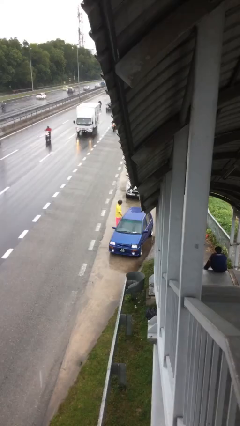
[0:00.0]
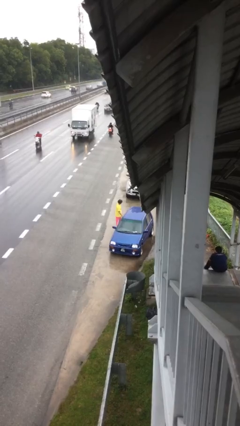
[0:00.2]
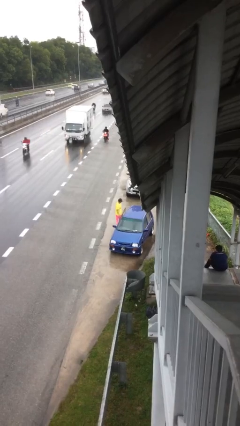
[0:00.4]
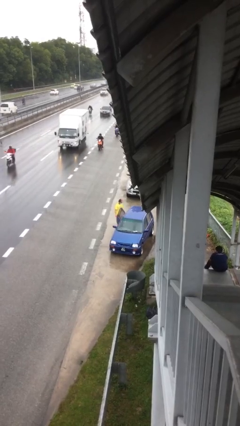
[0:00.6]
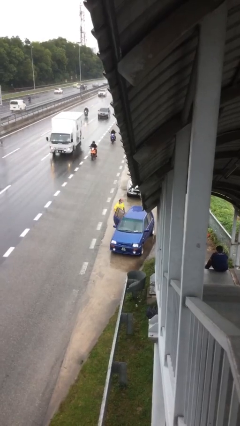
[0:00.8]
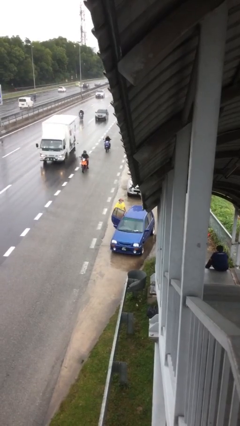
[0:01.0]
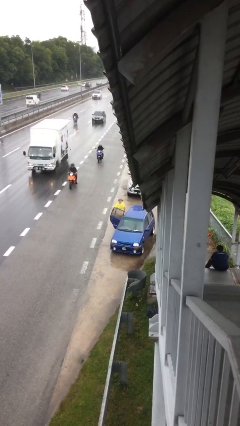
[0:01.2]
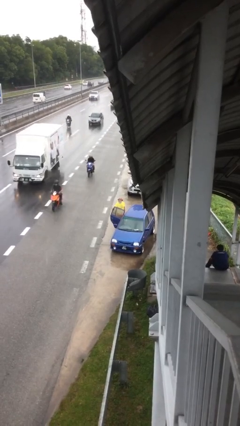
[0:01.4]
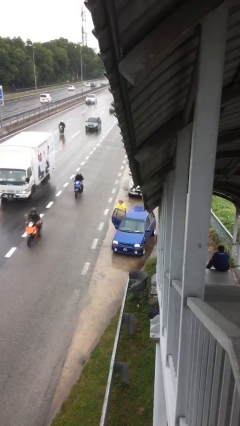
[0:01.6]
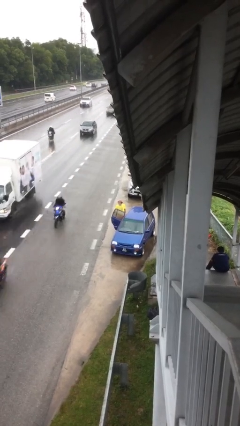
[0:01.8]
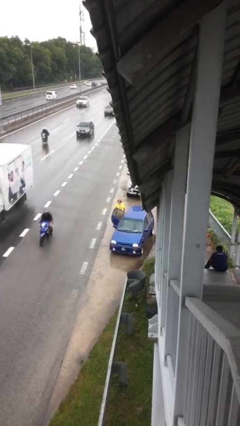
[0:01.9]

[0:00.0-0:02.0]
person opens car door

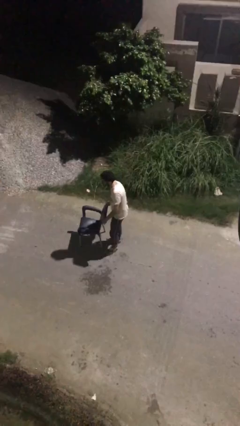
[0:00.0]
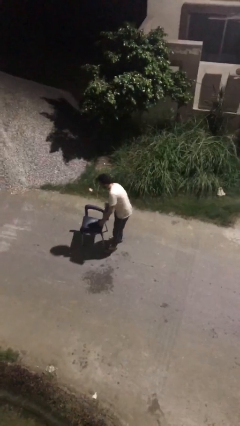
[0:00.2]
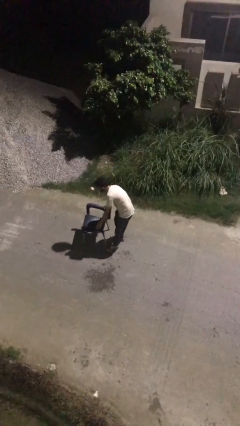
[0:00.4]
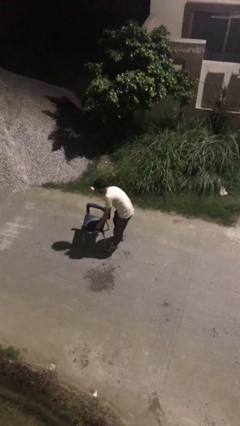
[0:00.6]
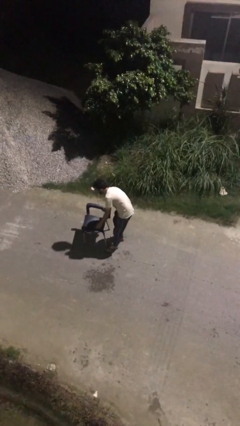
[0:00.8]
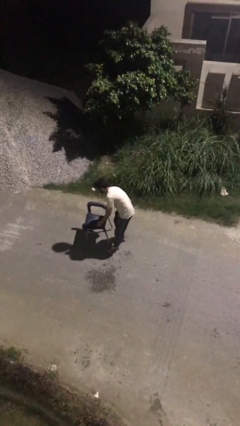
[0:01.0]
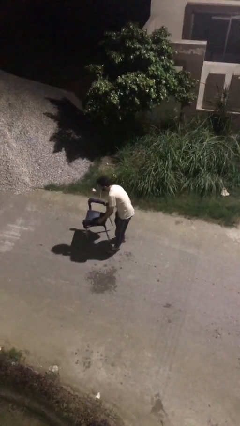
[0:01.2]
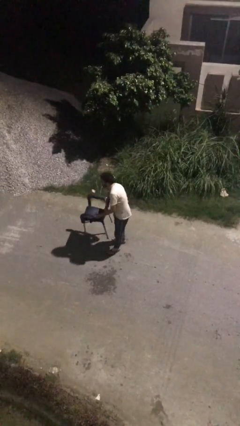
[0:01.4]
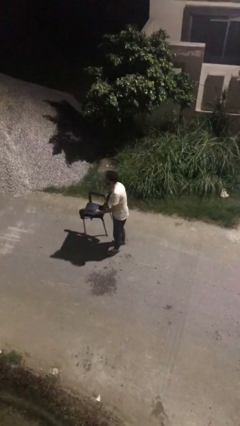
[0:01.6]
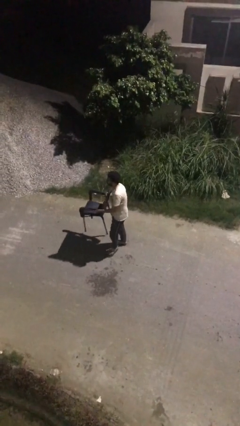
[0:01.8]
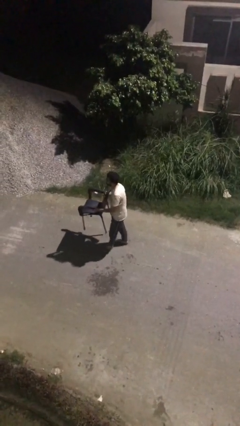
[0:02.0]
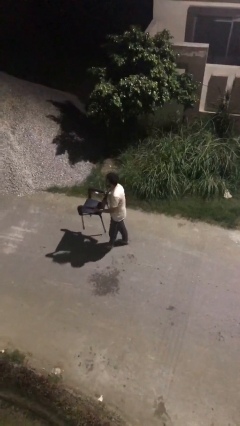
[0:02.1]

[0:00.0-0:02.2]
person picks up object from floor

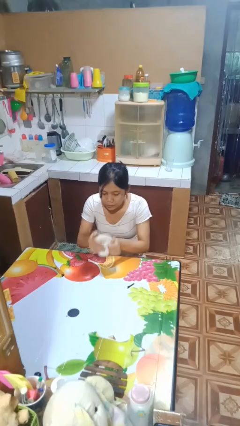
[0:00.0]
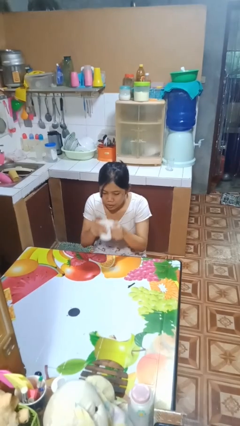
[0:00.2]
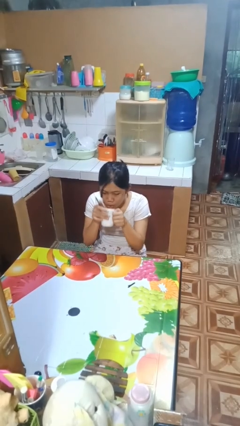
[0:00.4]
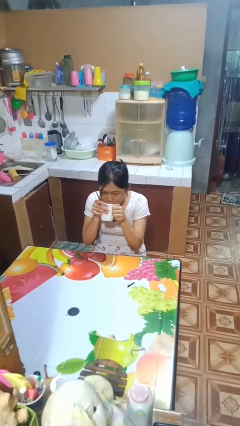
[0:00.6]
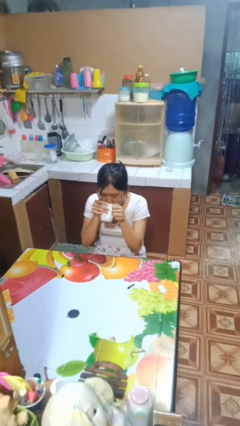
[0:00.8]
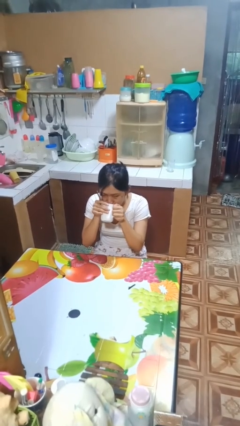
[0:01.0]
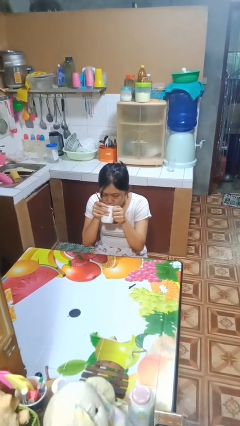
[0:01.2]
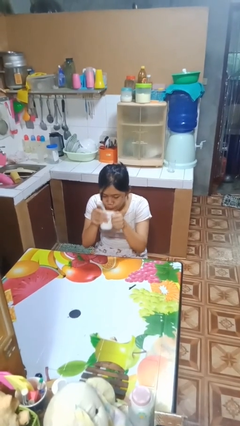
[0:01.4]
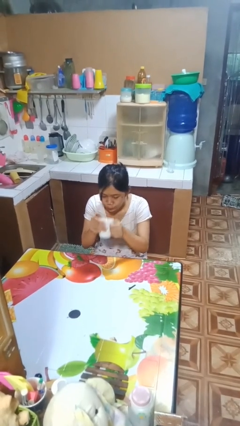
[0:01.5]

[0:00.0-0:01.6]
person drinks from mug

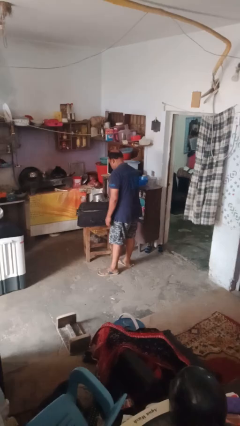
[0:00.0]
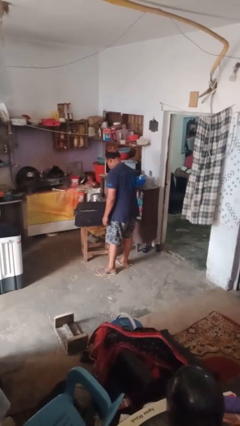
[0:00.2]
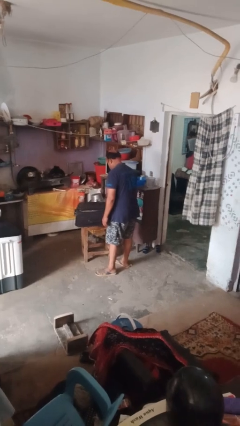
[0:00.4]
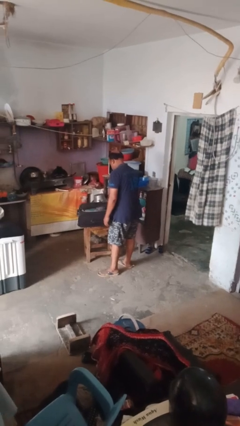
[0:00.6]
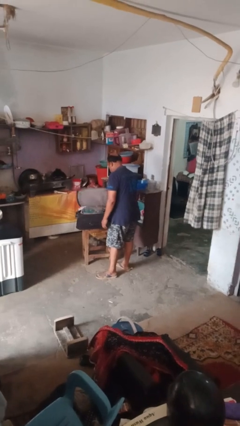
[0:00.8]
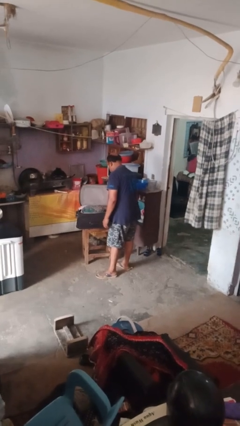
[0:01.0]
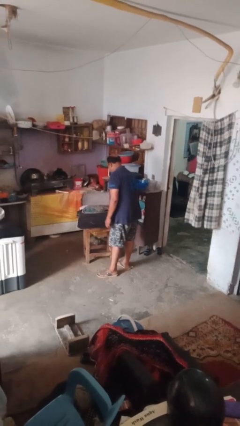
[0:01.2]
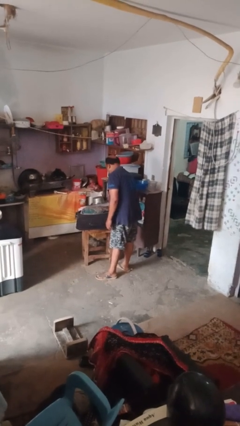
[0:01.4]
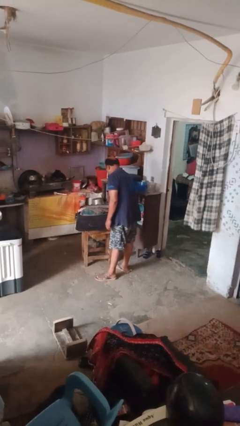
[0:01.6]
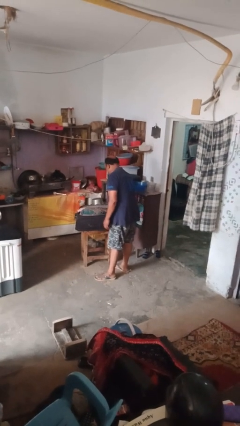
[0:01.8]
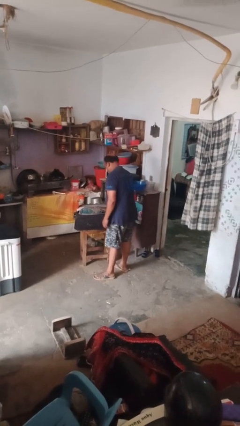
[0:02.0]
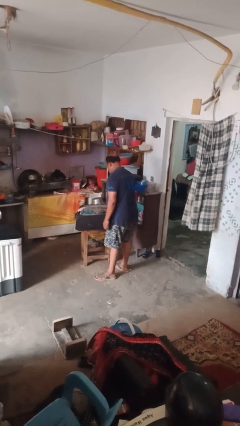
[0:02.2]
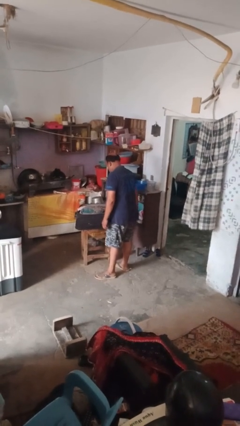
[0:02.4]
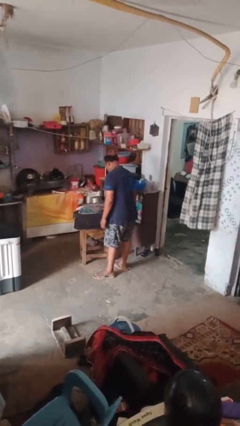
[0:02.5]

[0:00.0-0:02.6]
person opens suitcase

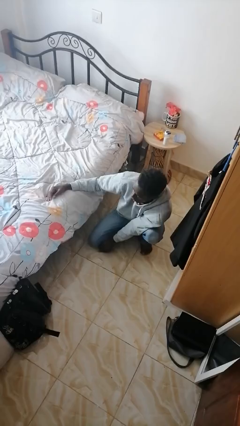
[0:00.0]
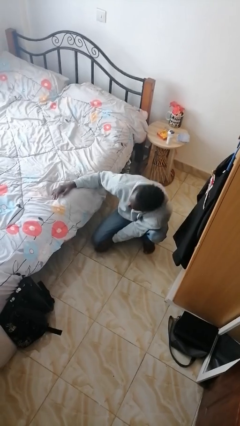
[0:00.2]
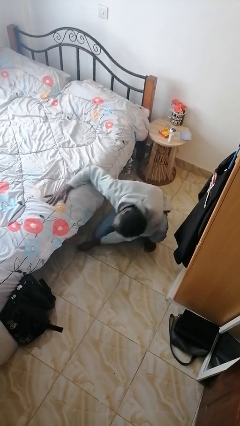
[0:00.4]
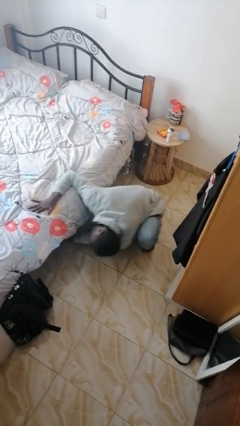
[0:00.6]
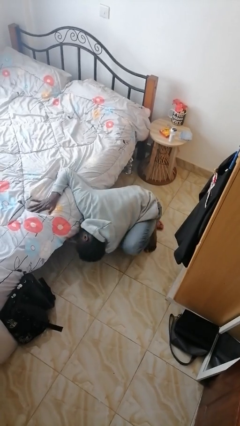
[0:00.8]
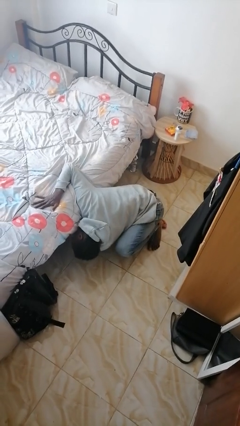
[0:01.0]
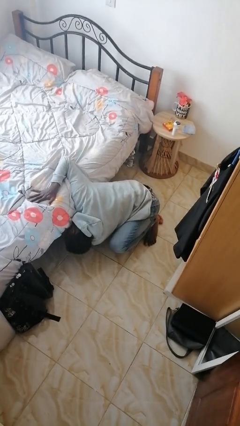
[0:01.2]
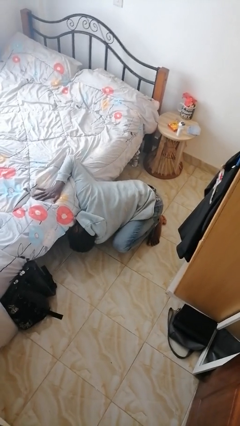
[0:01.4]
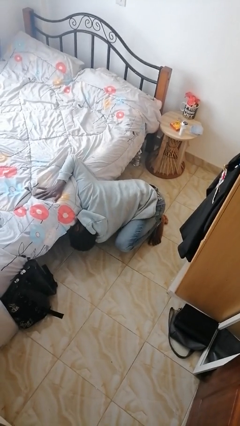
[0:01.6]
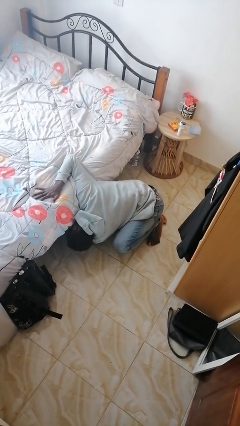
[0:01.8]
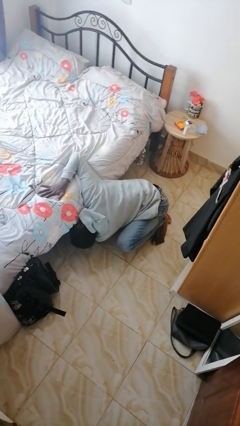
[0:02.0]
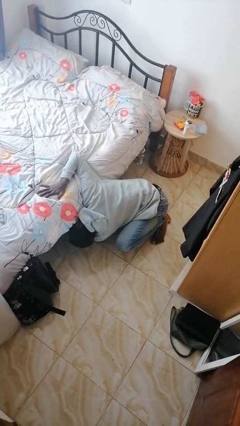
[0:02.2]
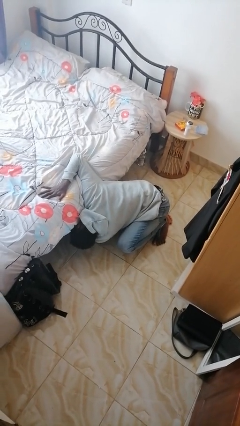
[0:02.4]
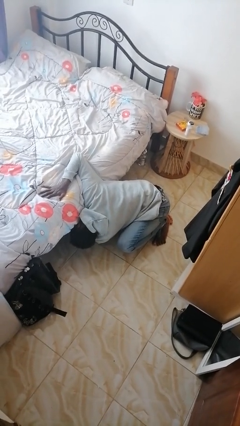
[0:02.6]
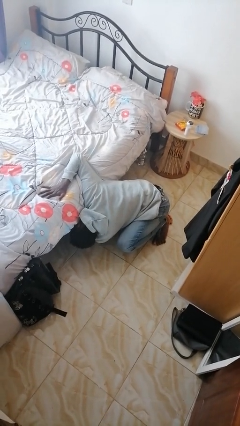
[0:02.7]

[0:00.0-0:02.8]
person searches under bed

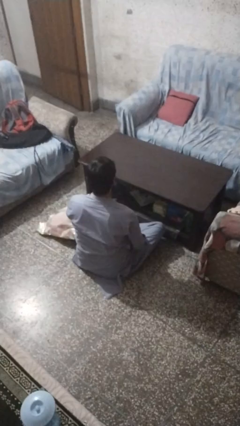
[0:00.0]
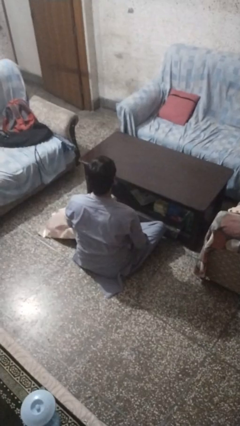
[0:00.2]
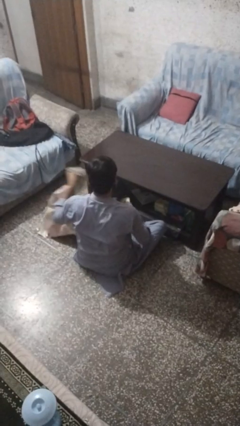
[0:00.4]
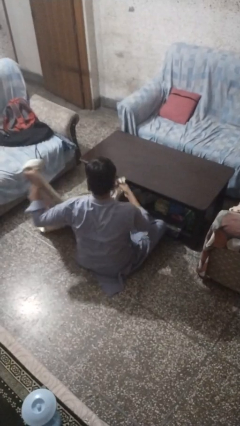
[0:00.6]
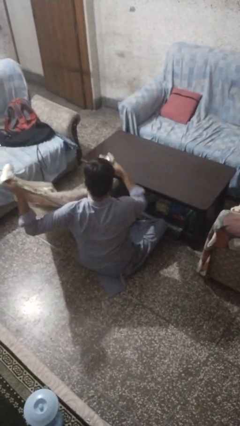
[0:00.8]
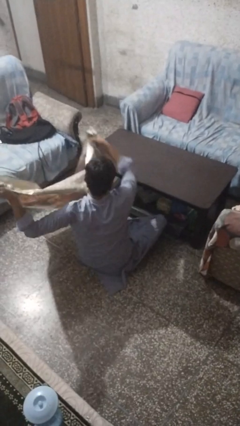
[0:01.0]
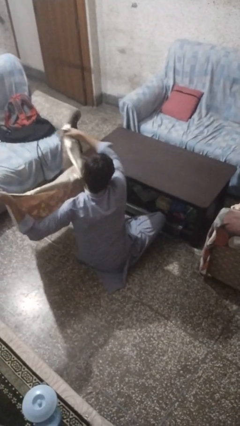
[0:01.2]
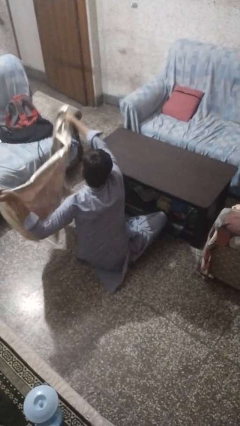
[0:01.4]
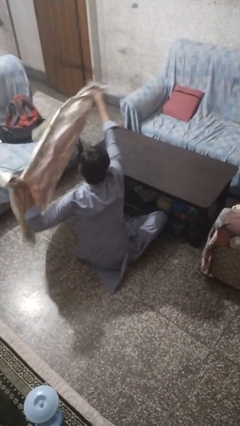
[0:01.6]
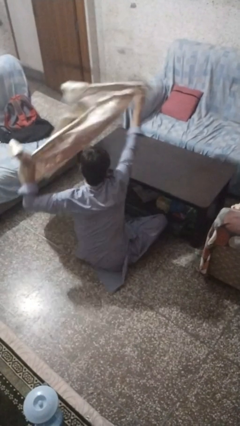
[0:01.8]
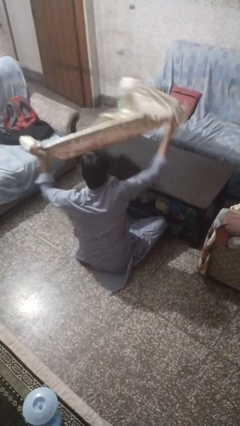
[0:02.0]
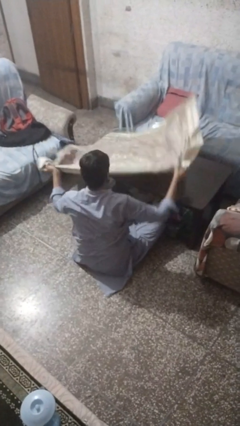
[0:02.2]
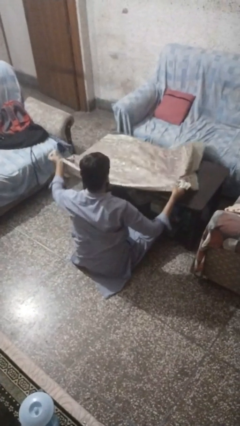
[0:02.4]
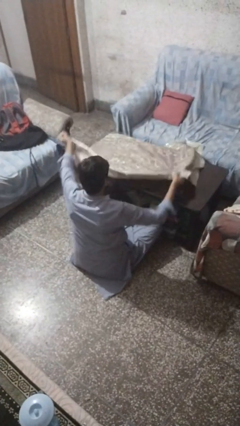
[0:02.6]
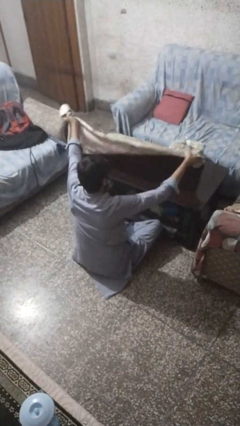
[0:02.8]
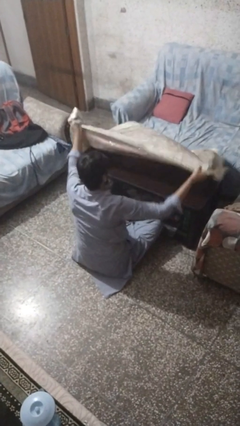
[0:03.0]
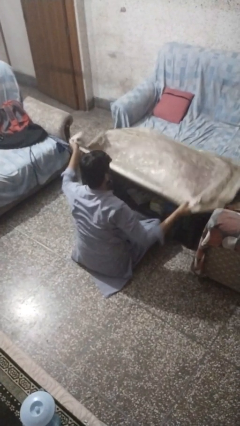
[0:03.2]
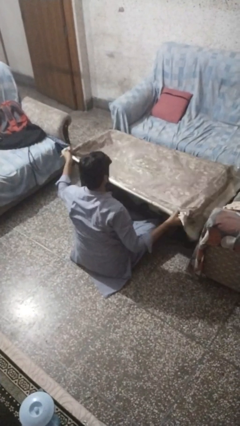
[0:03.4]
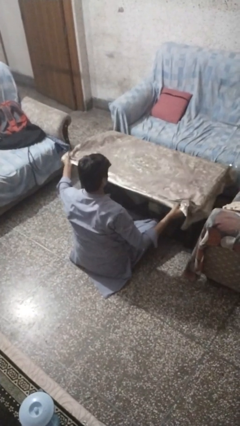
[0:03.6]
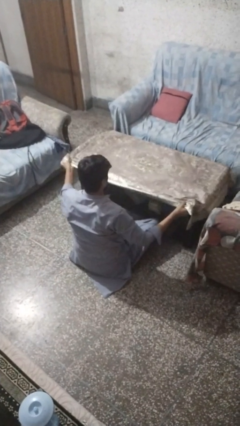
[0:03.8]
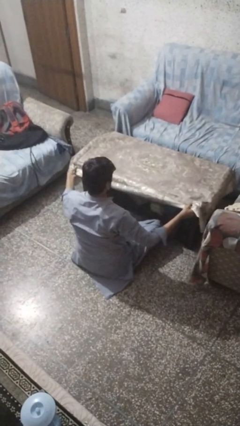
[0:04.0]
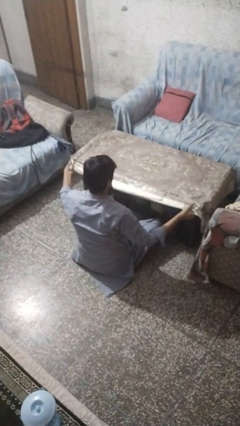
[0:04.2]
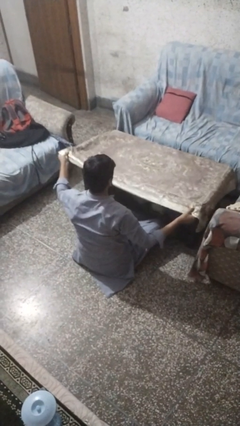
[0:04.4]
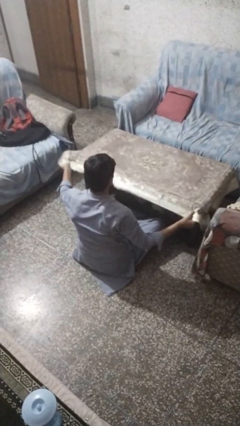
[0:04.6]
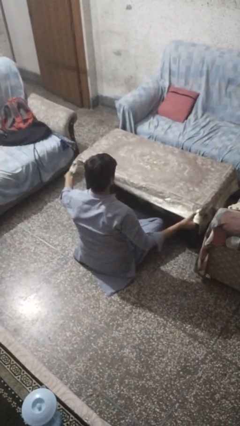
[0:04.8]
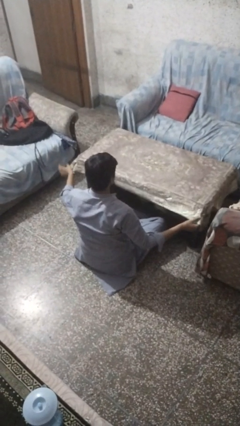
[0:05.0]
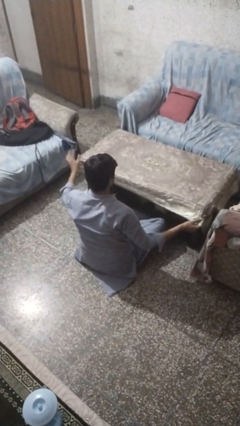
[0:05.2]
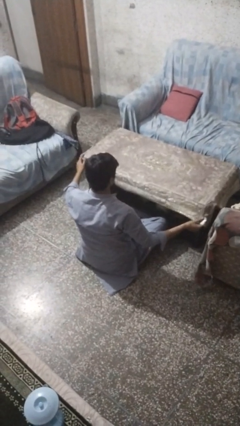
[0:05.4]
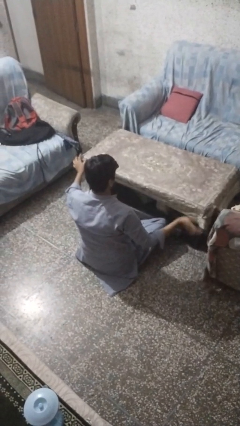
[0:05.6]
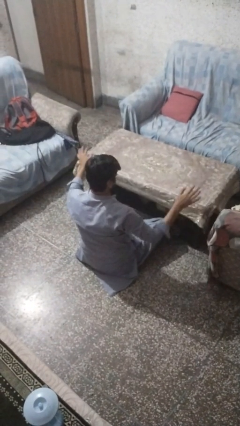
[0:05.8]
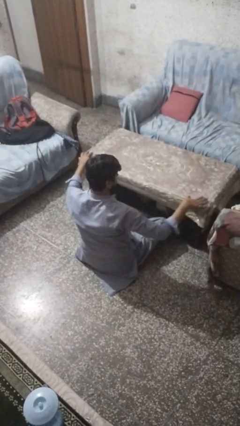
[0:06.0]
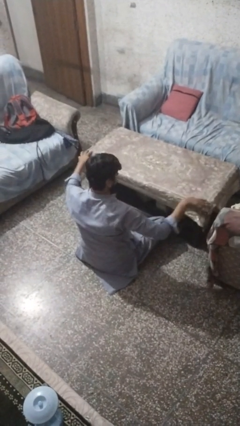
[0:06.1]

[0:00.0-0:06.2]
person spreads tablecloth

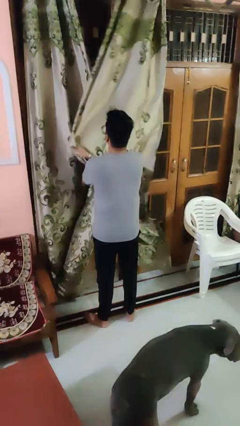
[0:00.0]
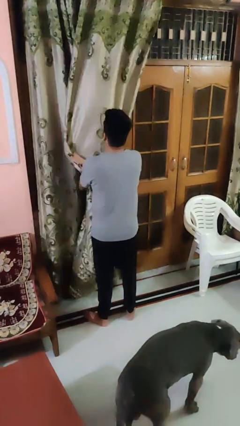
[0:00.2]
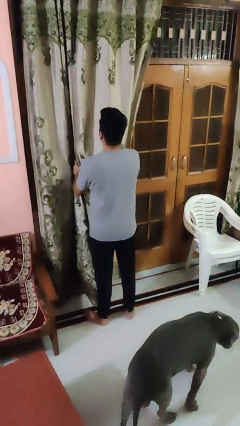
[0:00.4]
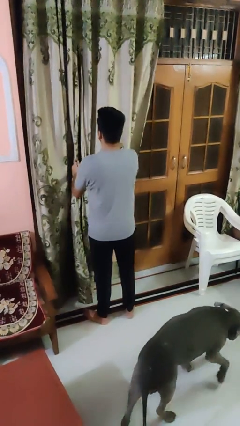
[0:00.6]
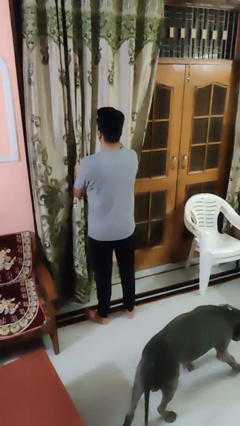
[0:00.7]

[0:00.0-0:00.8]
person closes curtains
